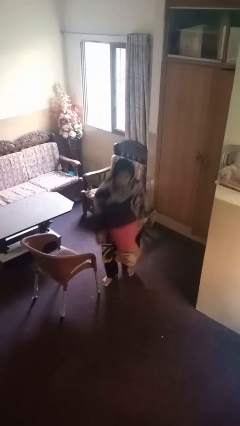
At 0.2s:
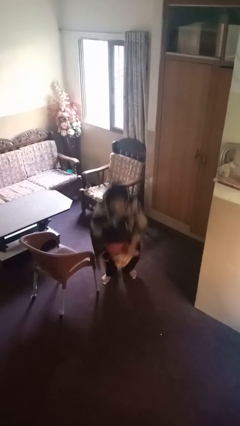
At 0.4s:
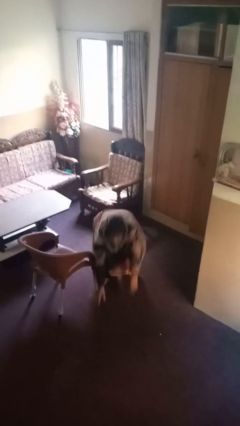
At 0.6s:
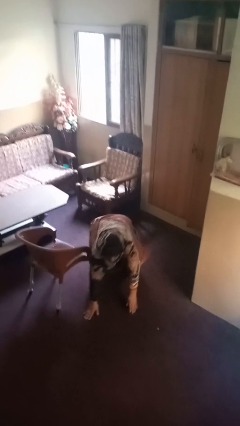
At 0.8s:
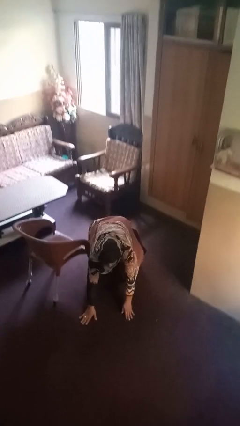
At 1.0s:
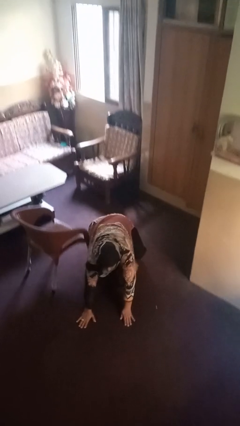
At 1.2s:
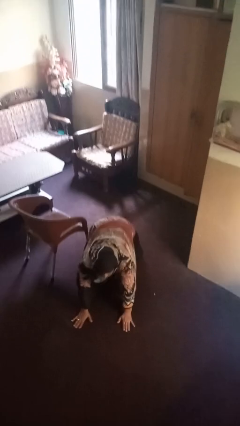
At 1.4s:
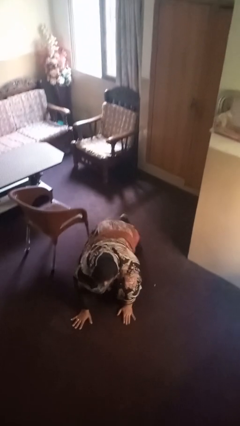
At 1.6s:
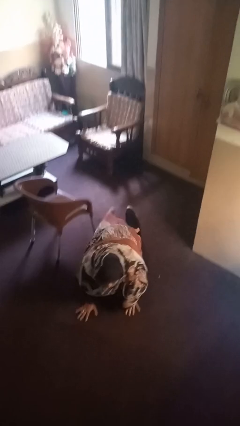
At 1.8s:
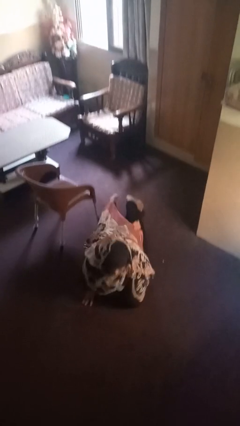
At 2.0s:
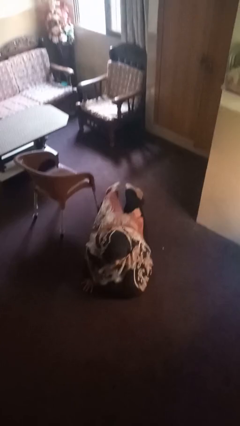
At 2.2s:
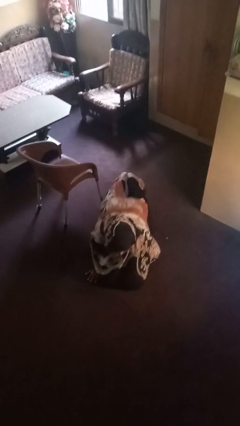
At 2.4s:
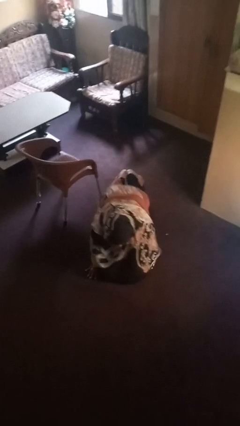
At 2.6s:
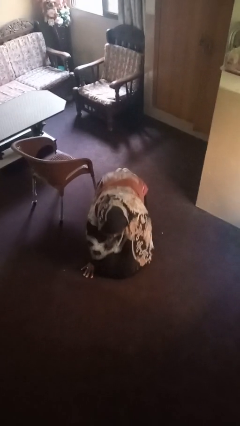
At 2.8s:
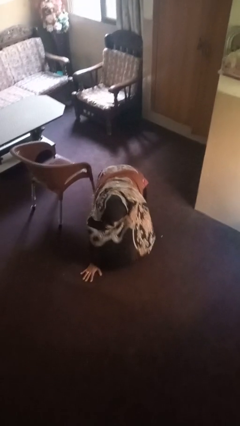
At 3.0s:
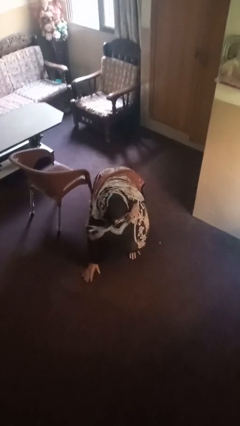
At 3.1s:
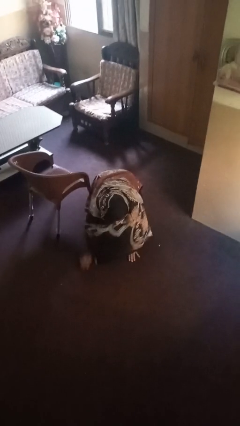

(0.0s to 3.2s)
person lies down on floor

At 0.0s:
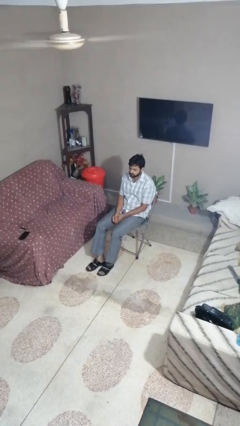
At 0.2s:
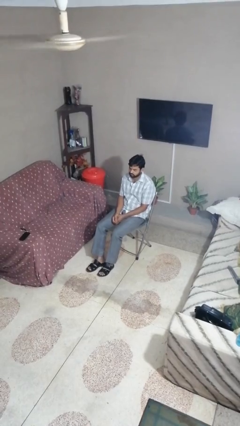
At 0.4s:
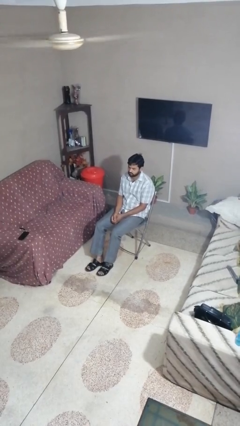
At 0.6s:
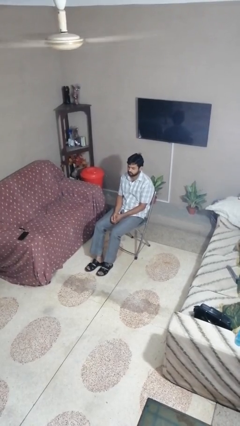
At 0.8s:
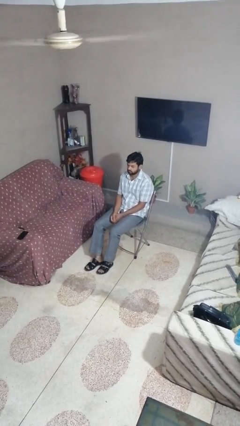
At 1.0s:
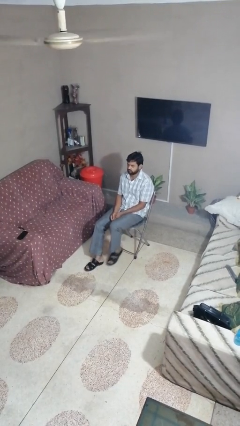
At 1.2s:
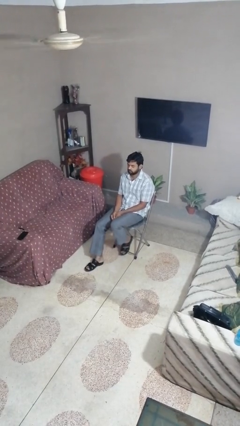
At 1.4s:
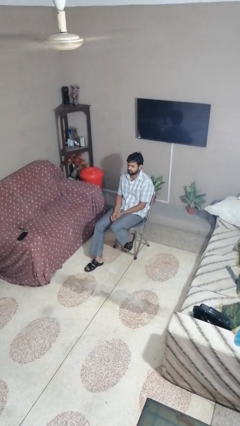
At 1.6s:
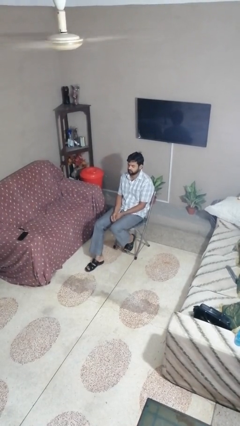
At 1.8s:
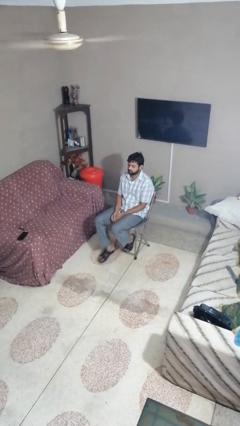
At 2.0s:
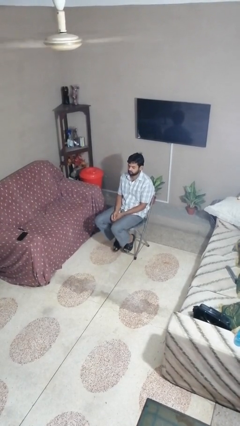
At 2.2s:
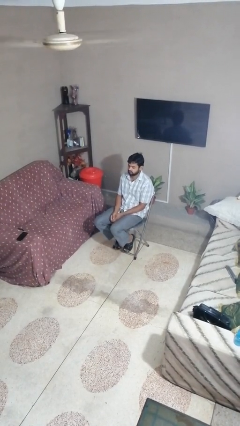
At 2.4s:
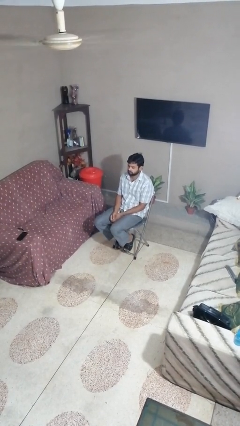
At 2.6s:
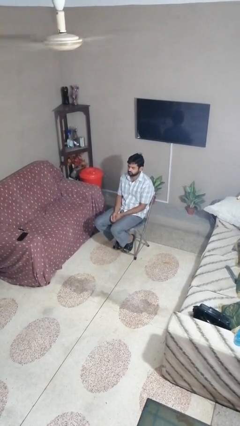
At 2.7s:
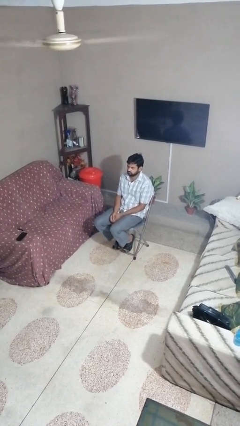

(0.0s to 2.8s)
person puts feet up

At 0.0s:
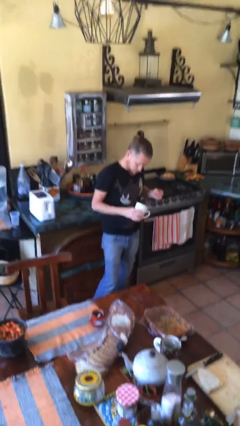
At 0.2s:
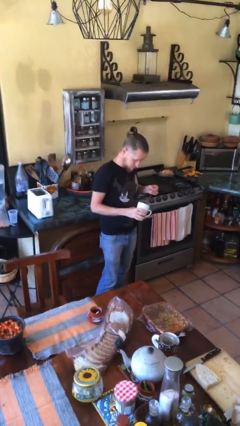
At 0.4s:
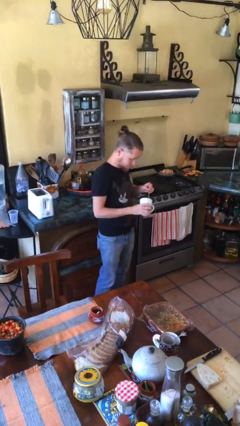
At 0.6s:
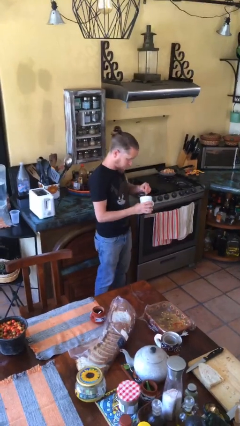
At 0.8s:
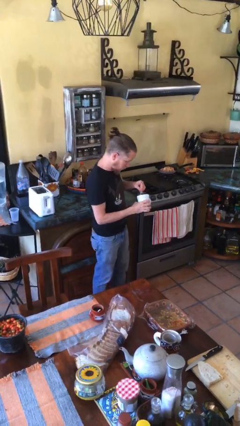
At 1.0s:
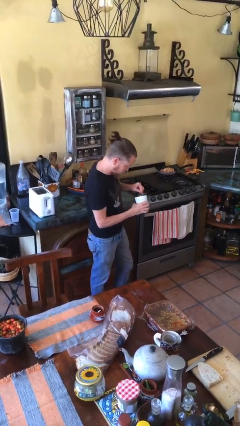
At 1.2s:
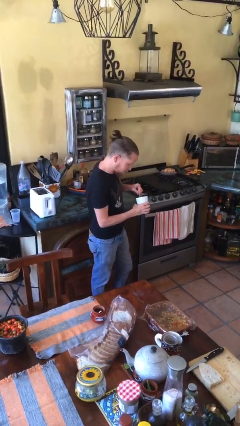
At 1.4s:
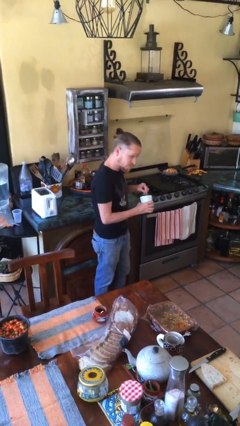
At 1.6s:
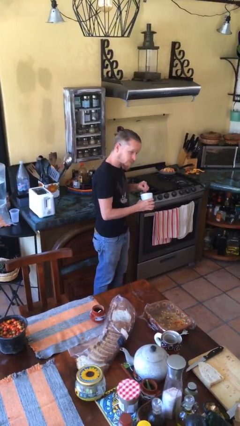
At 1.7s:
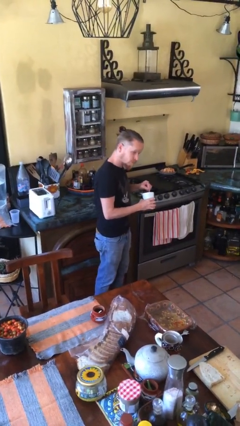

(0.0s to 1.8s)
person stirs mug

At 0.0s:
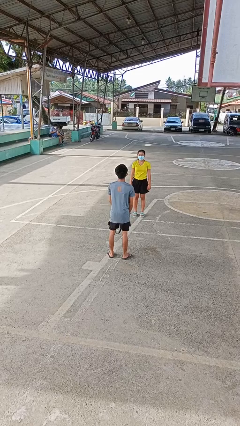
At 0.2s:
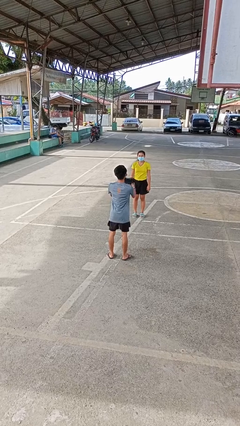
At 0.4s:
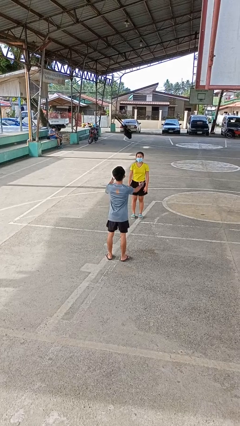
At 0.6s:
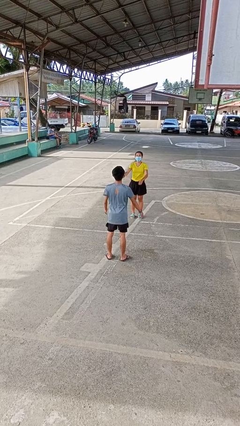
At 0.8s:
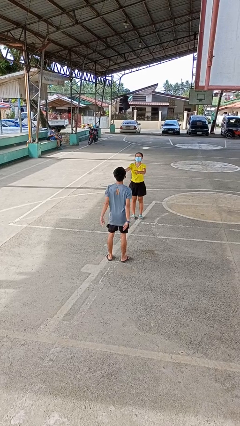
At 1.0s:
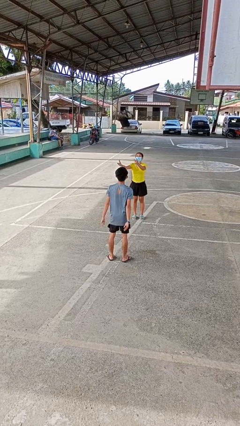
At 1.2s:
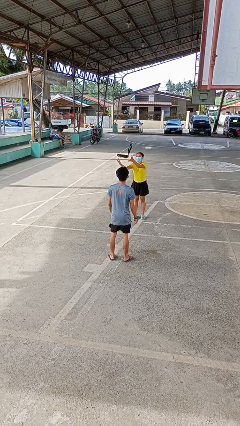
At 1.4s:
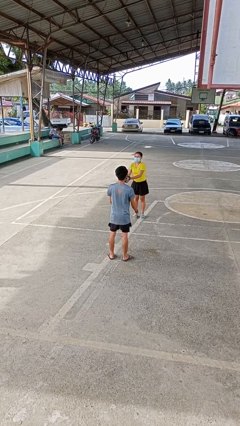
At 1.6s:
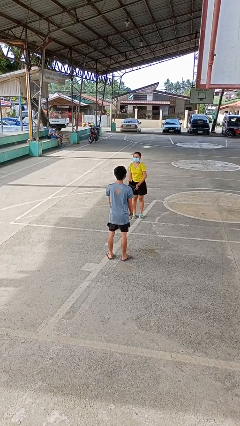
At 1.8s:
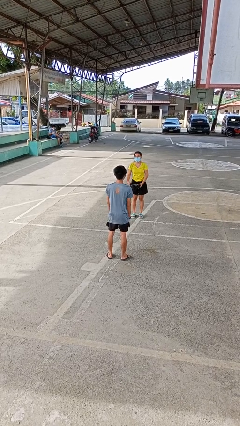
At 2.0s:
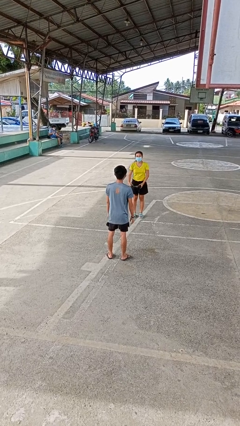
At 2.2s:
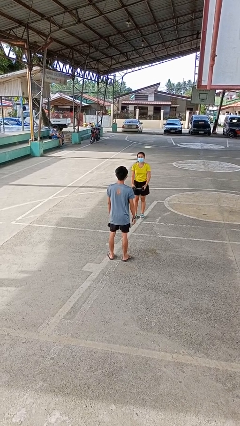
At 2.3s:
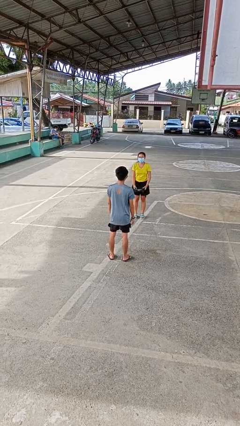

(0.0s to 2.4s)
person throws object to person

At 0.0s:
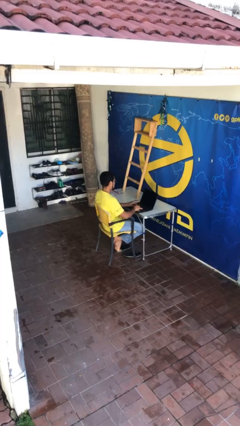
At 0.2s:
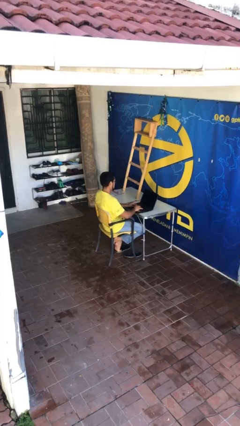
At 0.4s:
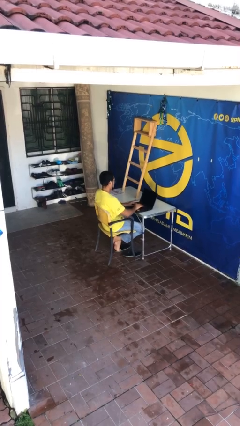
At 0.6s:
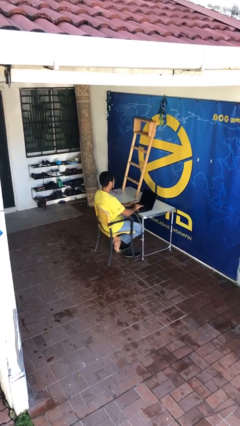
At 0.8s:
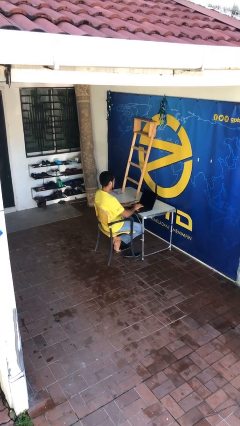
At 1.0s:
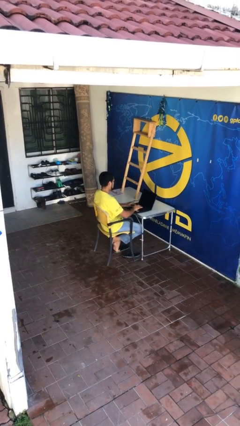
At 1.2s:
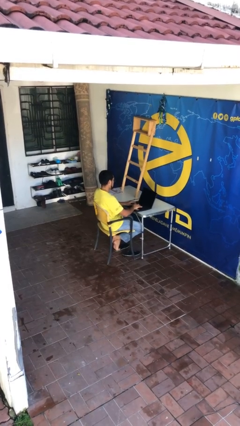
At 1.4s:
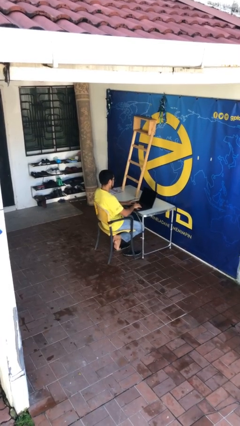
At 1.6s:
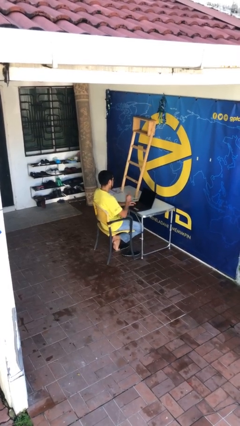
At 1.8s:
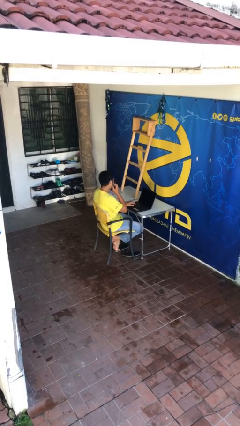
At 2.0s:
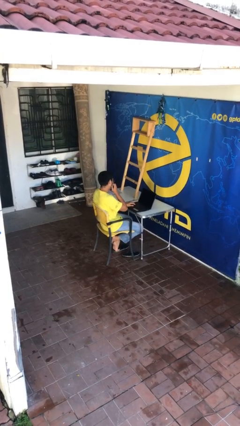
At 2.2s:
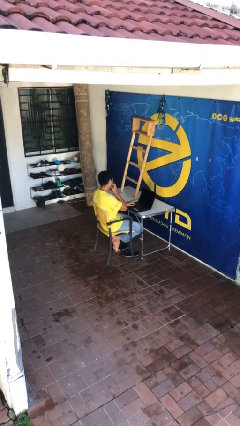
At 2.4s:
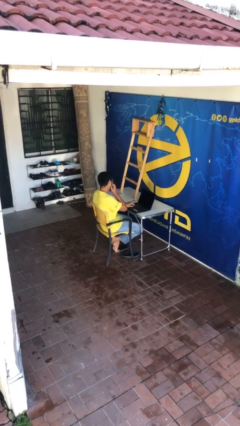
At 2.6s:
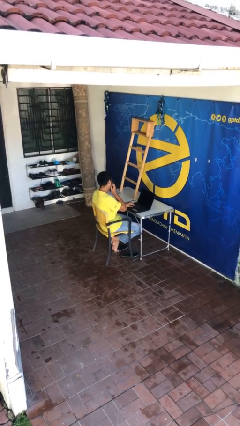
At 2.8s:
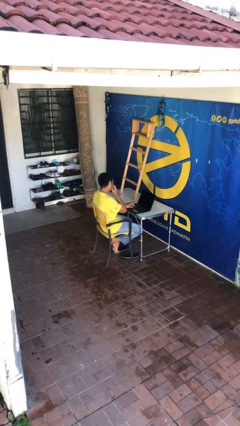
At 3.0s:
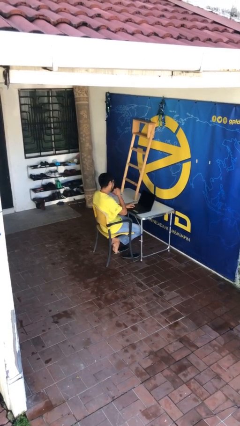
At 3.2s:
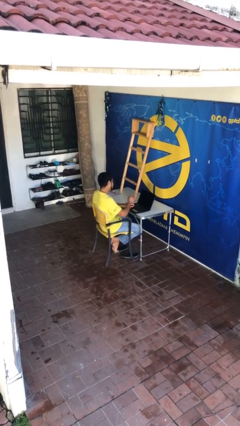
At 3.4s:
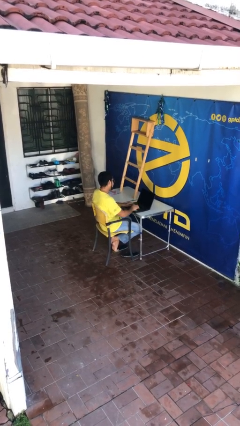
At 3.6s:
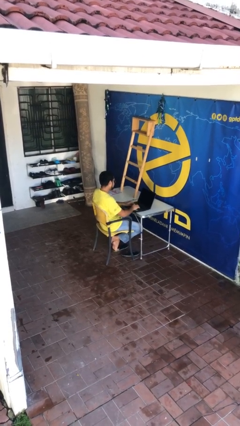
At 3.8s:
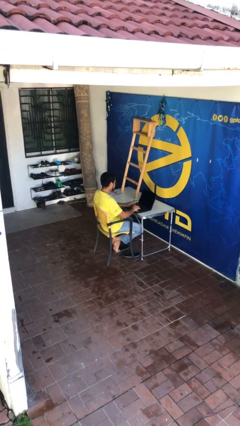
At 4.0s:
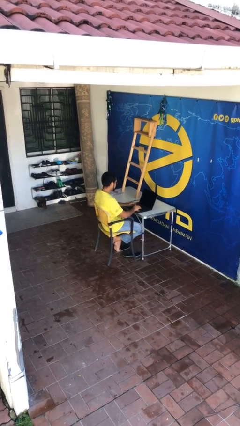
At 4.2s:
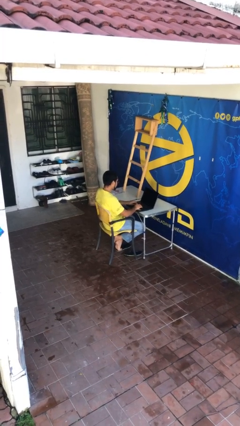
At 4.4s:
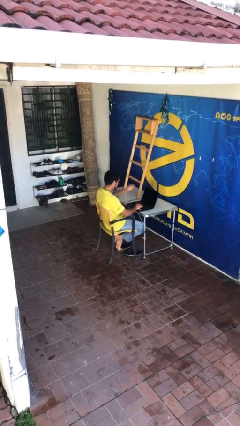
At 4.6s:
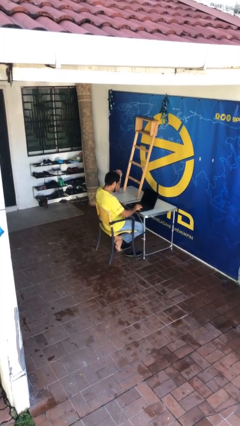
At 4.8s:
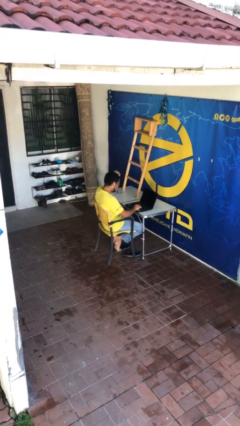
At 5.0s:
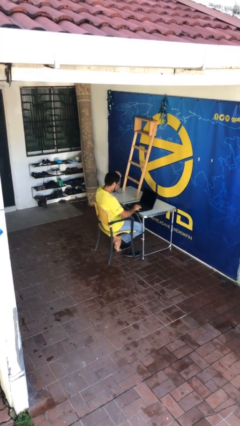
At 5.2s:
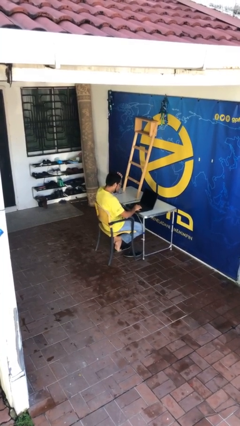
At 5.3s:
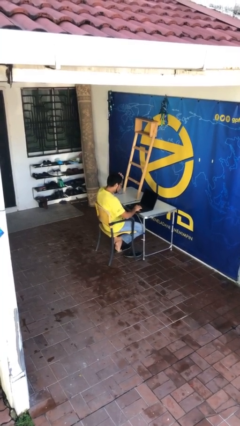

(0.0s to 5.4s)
person interacts with laptop

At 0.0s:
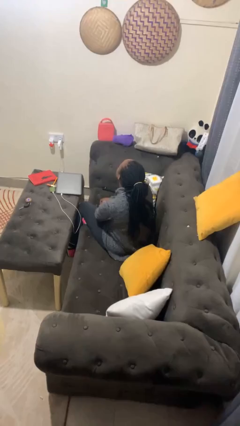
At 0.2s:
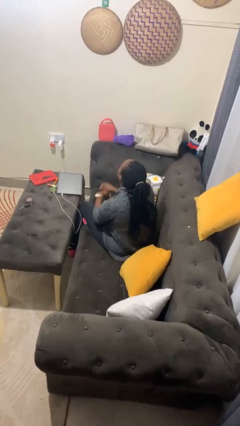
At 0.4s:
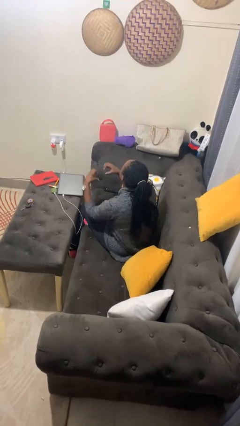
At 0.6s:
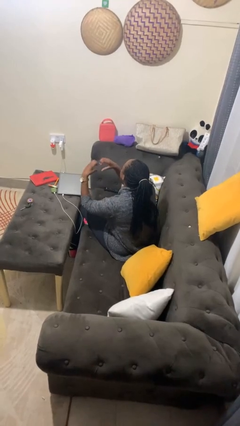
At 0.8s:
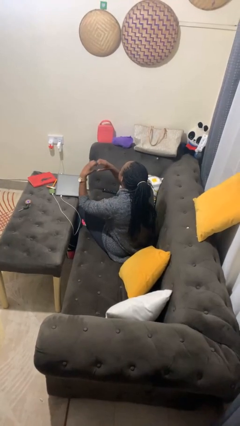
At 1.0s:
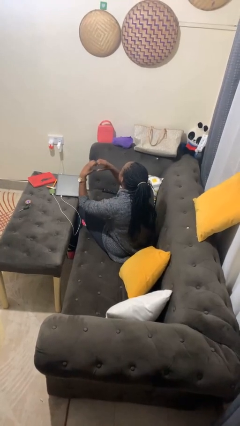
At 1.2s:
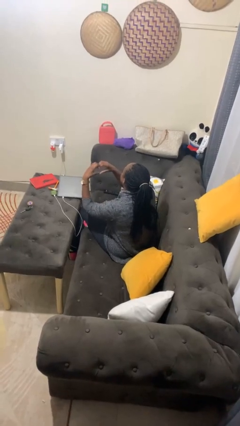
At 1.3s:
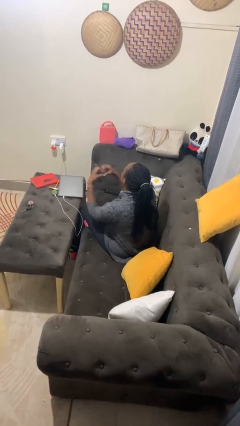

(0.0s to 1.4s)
person gestures heart

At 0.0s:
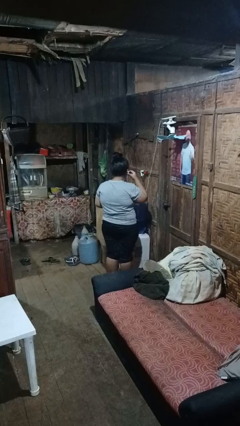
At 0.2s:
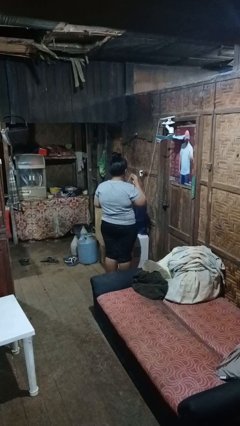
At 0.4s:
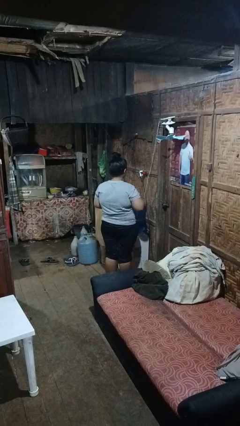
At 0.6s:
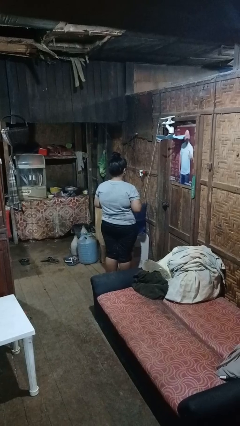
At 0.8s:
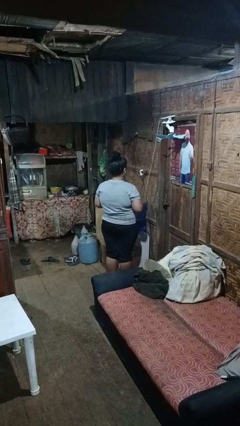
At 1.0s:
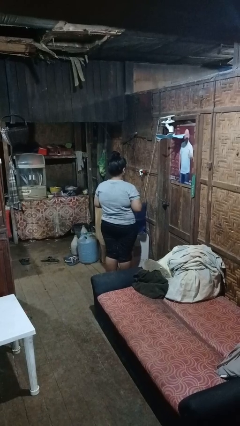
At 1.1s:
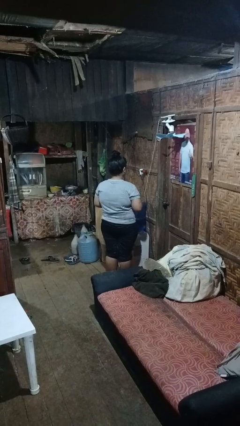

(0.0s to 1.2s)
person takes off headphones
